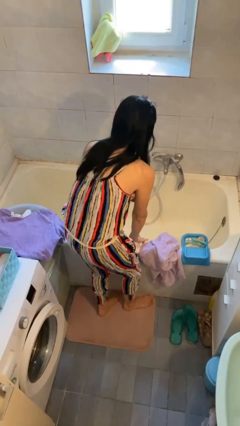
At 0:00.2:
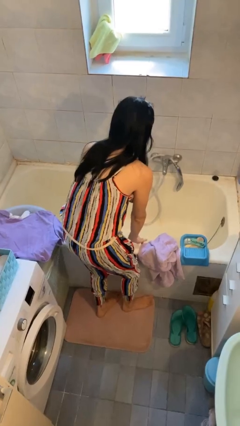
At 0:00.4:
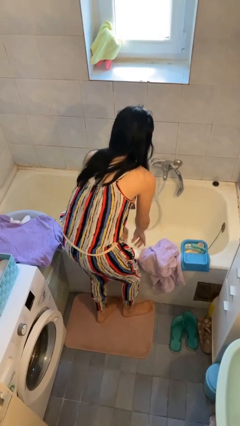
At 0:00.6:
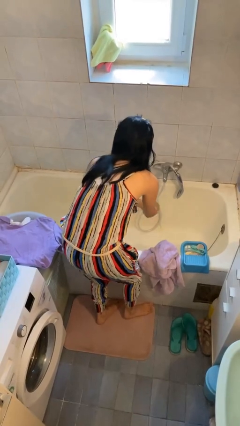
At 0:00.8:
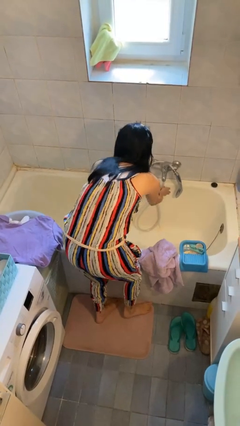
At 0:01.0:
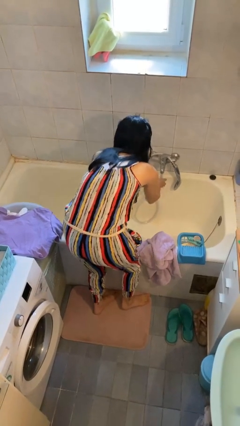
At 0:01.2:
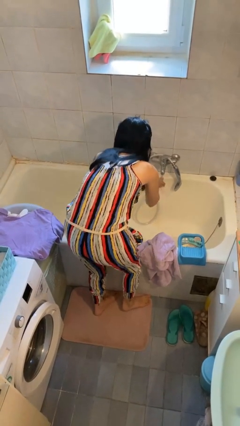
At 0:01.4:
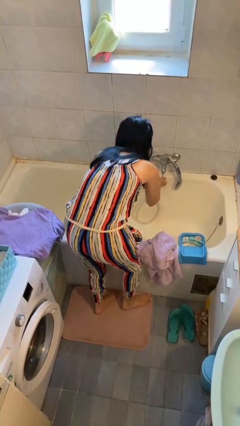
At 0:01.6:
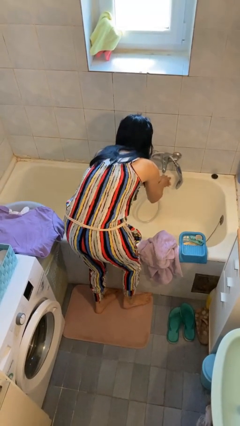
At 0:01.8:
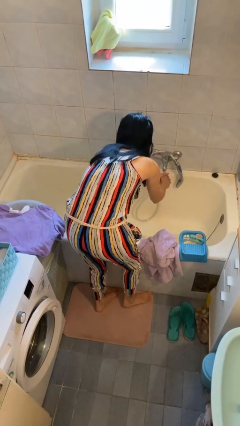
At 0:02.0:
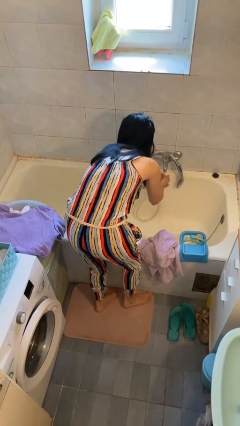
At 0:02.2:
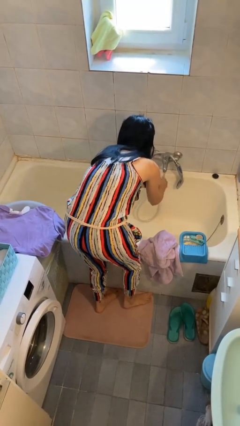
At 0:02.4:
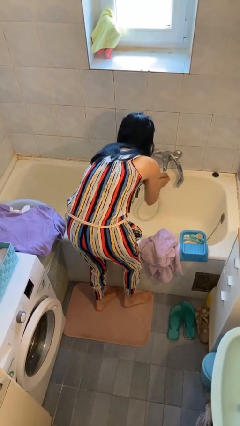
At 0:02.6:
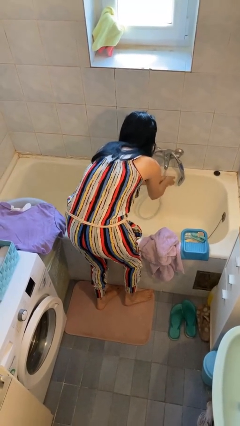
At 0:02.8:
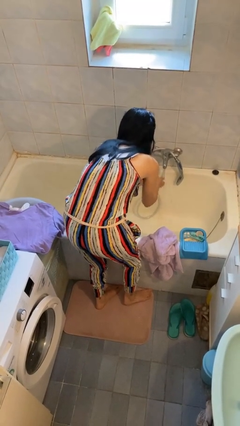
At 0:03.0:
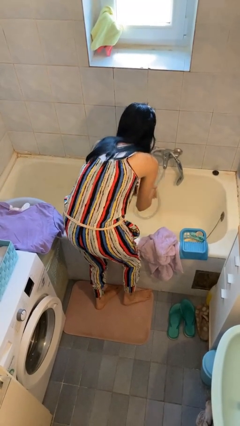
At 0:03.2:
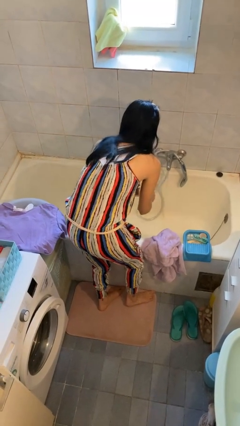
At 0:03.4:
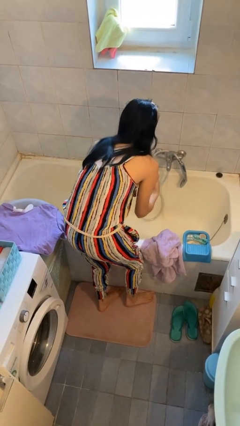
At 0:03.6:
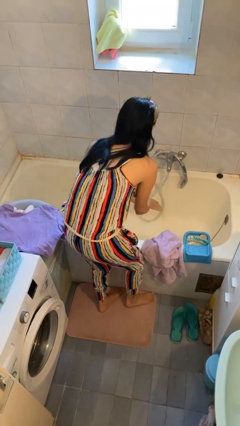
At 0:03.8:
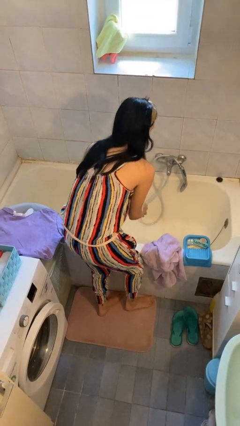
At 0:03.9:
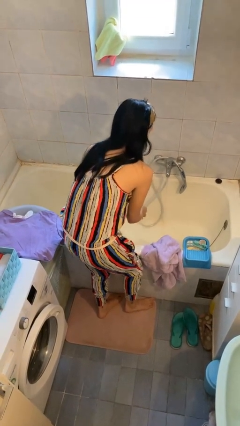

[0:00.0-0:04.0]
person washes hands

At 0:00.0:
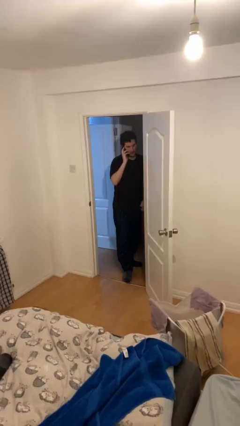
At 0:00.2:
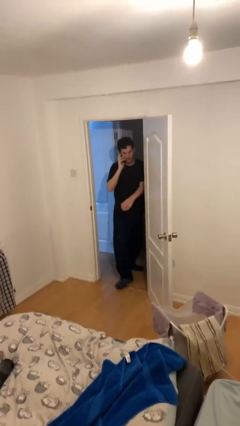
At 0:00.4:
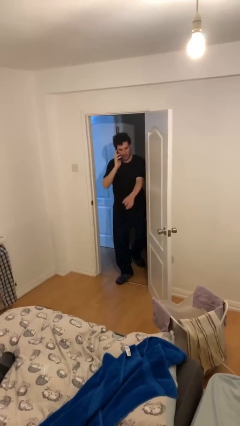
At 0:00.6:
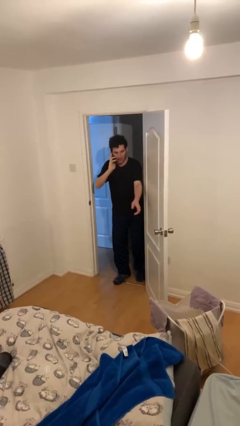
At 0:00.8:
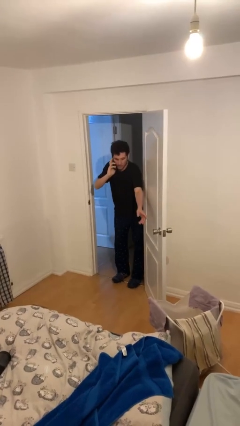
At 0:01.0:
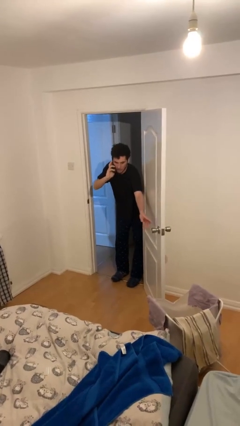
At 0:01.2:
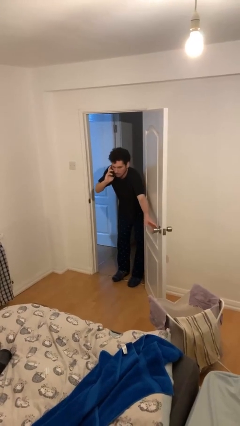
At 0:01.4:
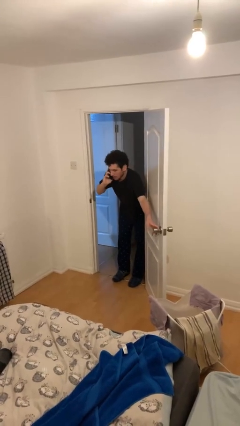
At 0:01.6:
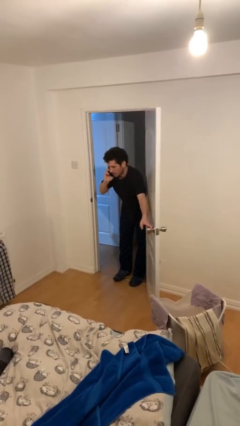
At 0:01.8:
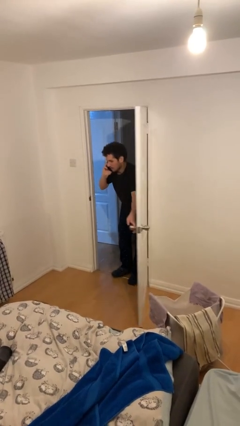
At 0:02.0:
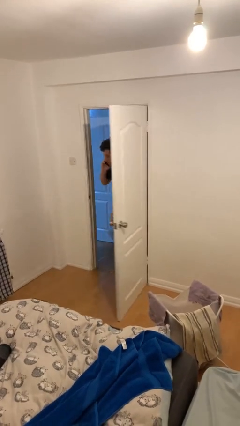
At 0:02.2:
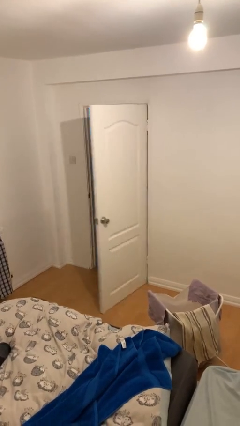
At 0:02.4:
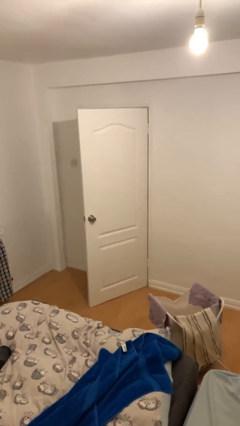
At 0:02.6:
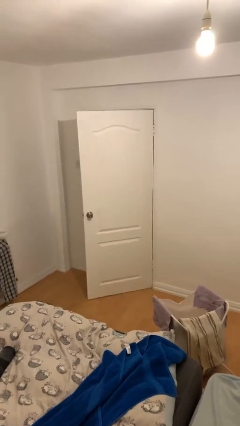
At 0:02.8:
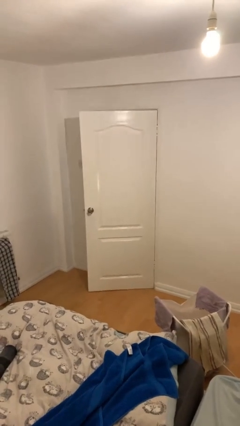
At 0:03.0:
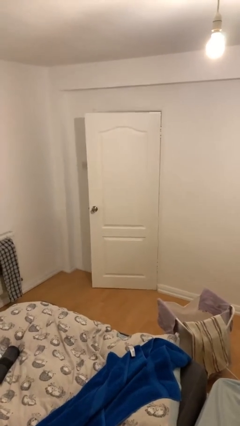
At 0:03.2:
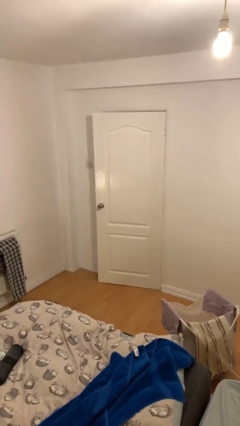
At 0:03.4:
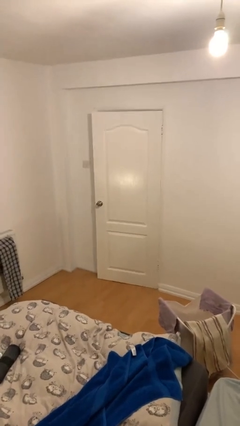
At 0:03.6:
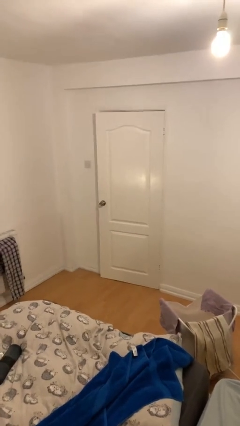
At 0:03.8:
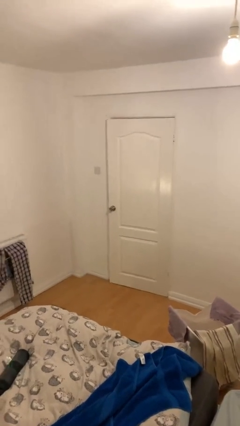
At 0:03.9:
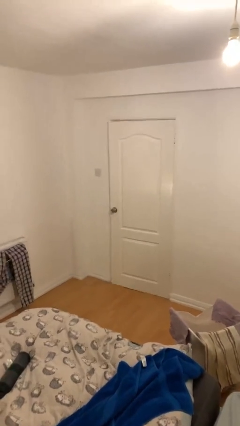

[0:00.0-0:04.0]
person closes facility door

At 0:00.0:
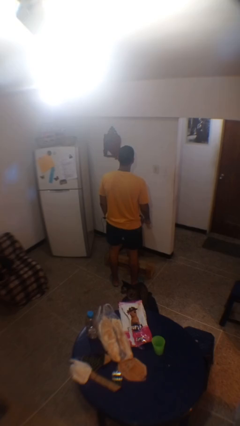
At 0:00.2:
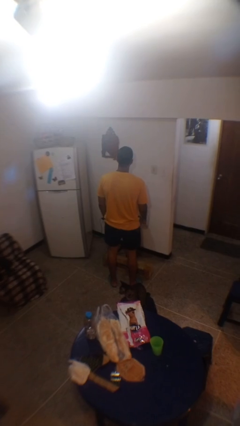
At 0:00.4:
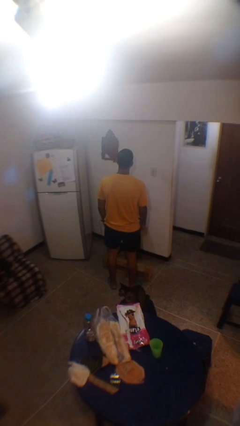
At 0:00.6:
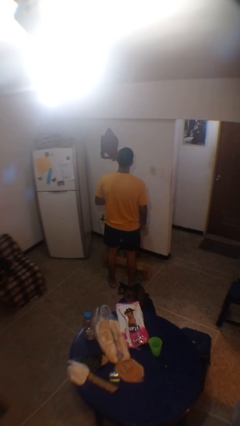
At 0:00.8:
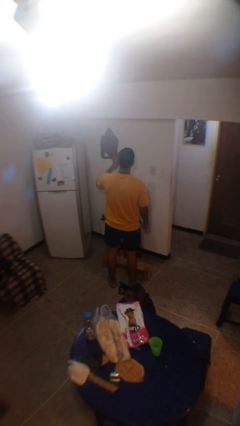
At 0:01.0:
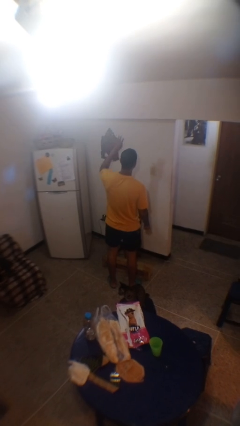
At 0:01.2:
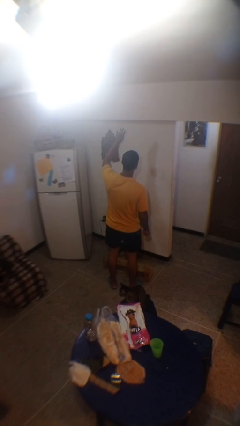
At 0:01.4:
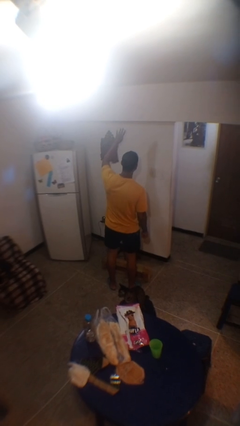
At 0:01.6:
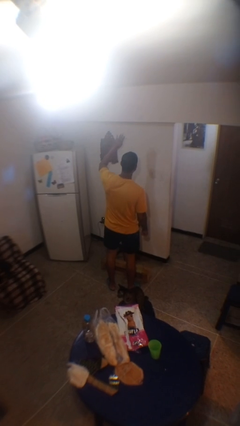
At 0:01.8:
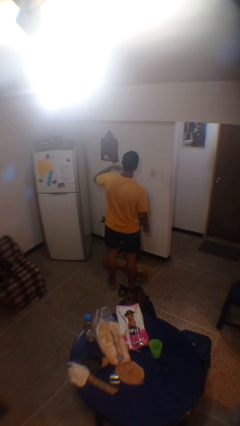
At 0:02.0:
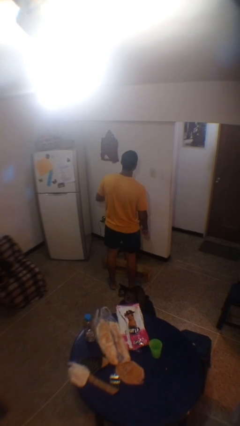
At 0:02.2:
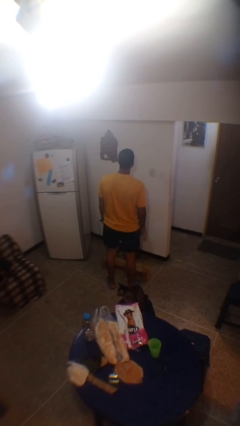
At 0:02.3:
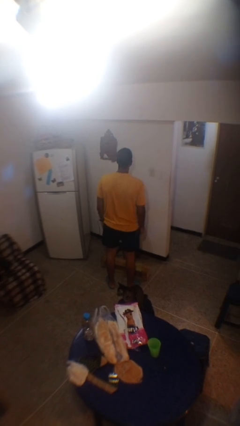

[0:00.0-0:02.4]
person gestures number four

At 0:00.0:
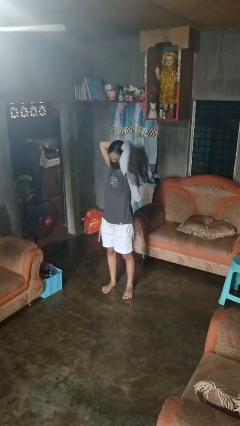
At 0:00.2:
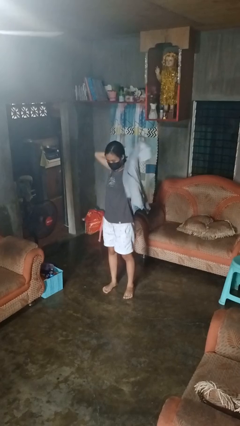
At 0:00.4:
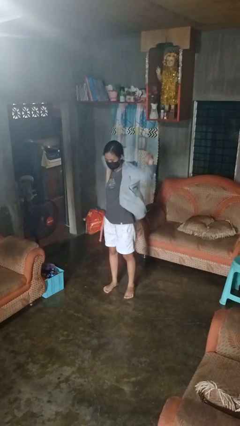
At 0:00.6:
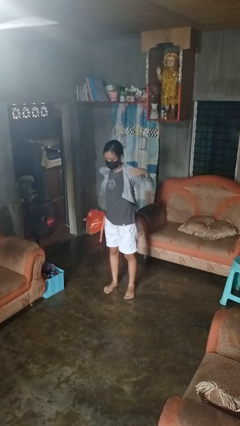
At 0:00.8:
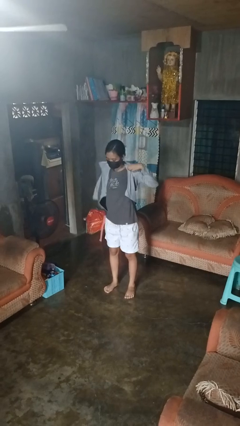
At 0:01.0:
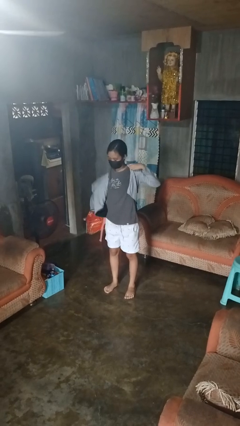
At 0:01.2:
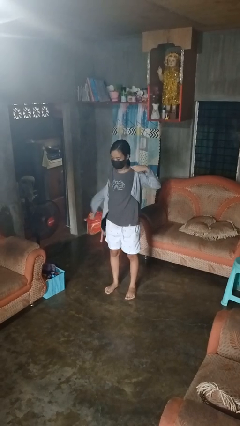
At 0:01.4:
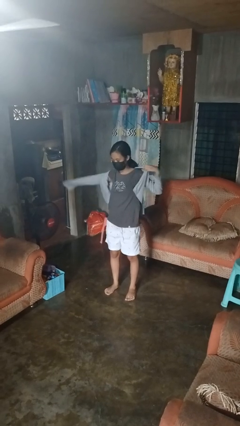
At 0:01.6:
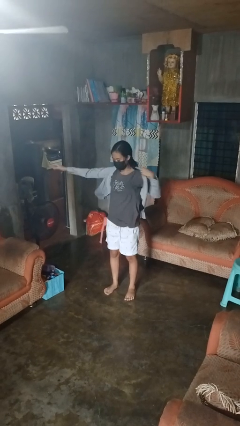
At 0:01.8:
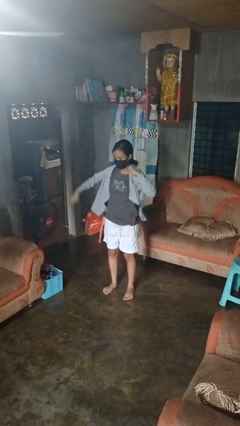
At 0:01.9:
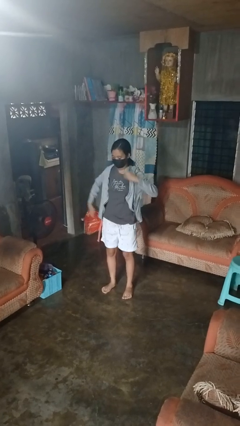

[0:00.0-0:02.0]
person puts on jacket

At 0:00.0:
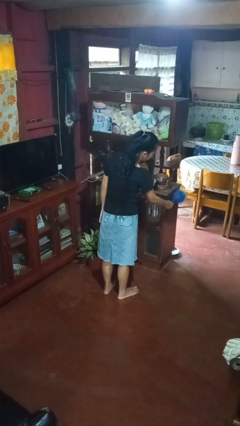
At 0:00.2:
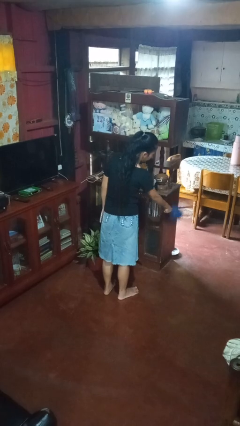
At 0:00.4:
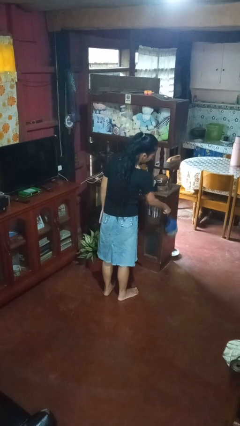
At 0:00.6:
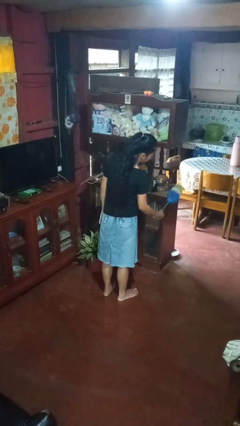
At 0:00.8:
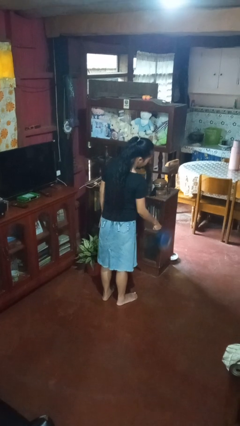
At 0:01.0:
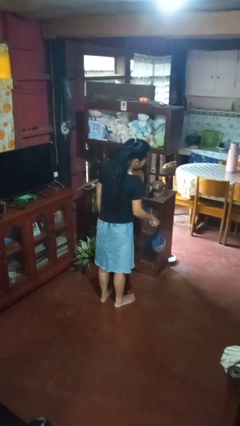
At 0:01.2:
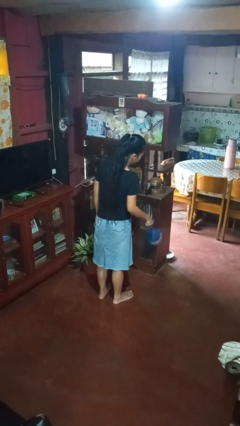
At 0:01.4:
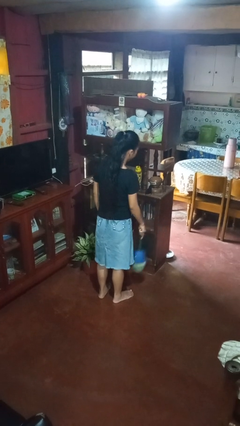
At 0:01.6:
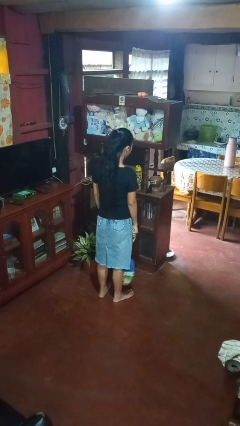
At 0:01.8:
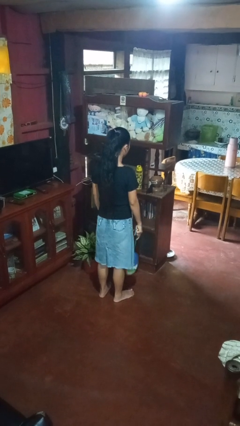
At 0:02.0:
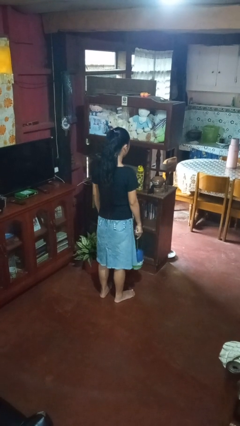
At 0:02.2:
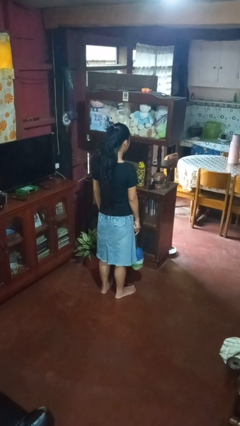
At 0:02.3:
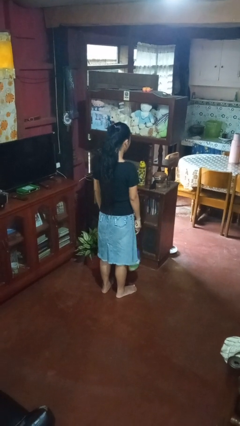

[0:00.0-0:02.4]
person dusts furniture

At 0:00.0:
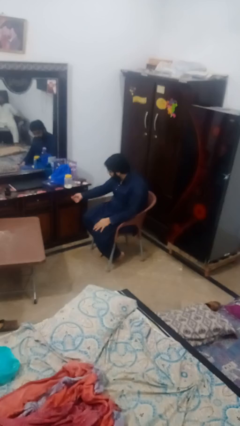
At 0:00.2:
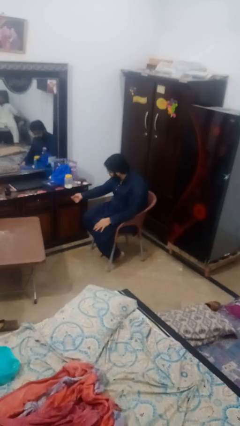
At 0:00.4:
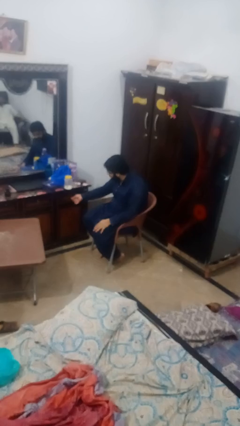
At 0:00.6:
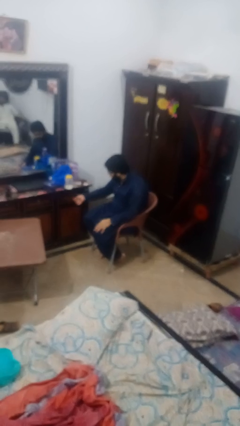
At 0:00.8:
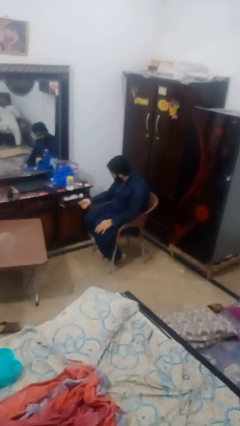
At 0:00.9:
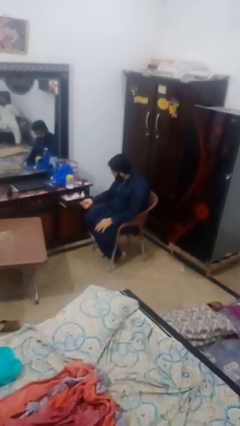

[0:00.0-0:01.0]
person closes dresser drawer

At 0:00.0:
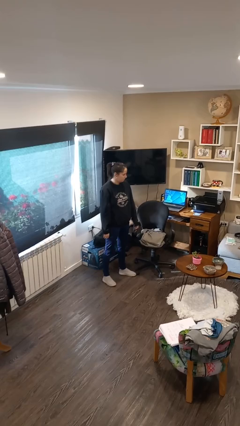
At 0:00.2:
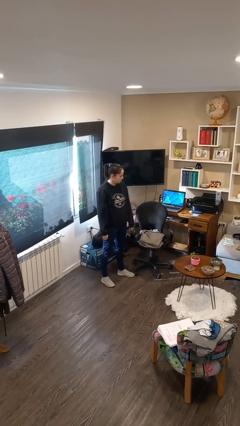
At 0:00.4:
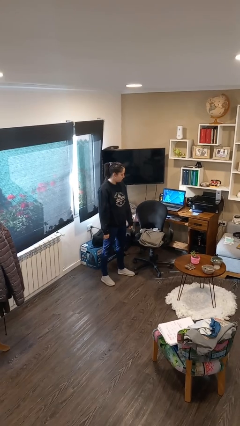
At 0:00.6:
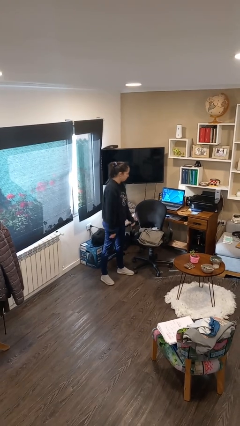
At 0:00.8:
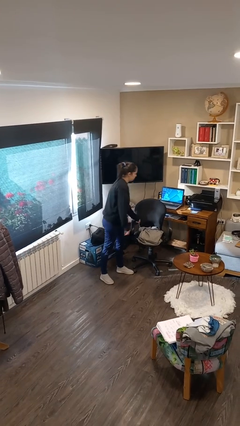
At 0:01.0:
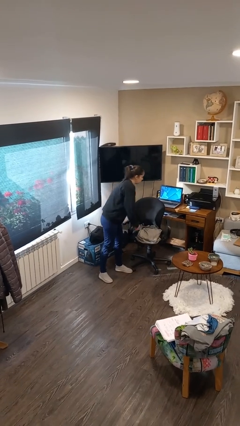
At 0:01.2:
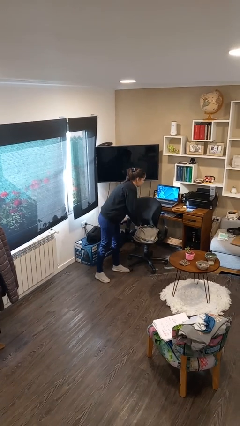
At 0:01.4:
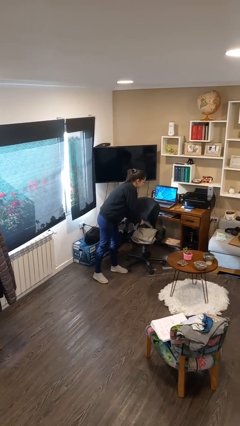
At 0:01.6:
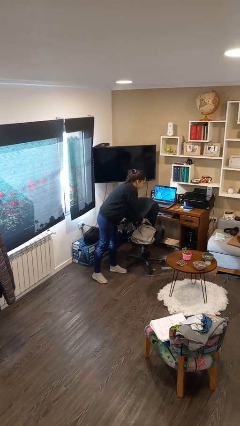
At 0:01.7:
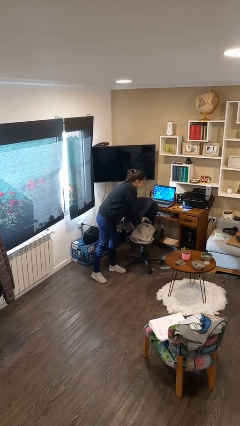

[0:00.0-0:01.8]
person searches in backpack
